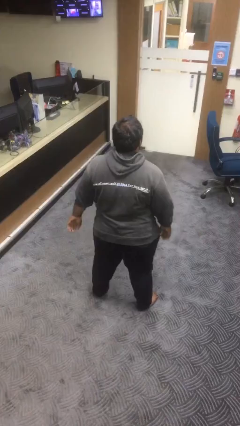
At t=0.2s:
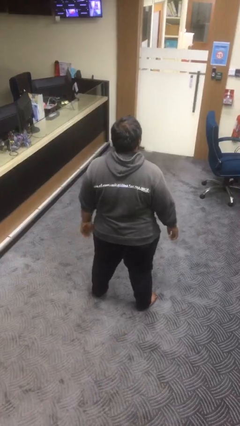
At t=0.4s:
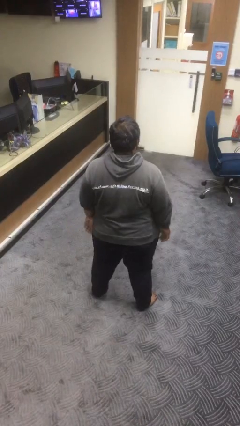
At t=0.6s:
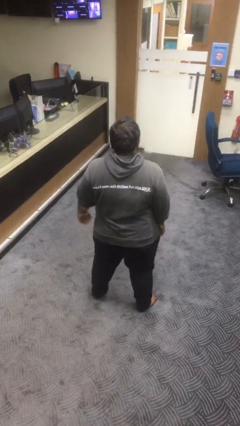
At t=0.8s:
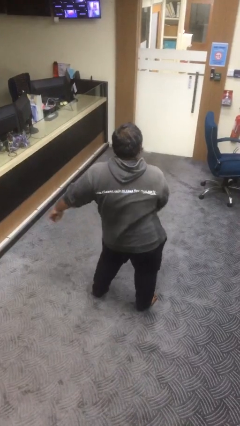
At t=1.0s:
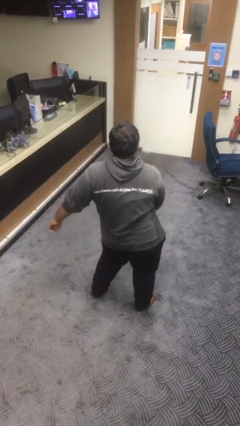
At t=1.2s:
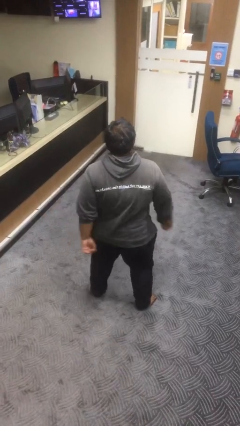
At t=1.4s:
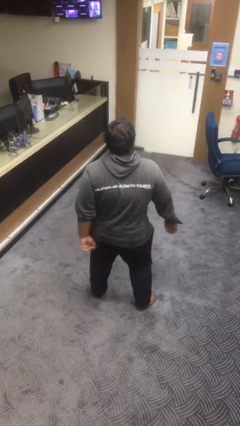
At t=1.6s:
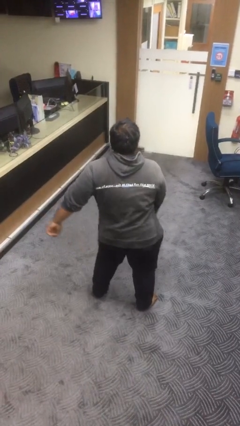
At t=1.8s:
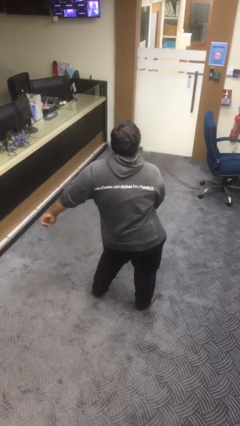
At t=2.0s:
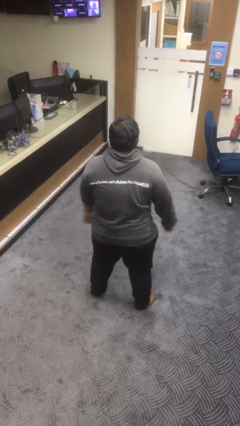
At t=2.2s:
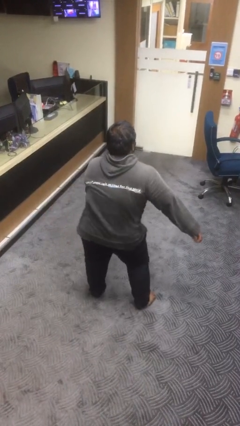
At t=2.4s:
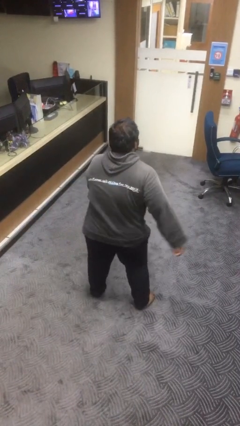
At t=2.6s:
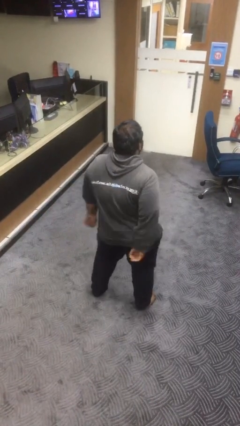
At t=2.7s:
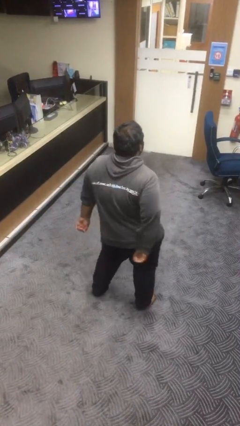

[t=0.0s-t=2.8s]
person dances in place

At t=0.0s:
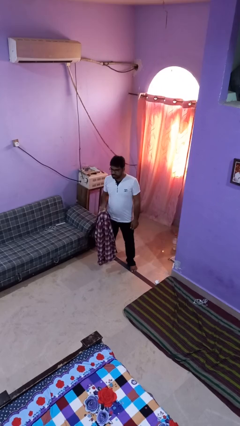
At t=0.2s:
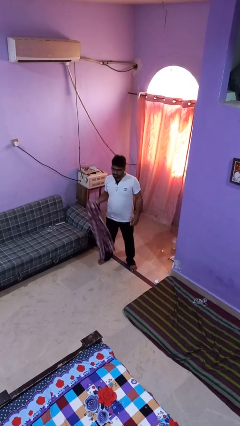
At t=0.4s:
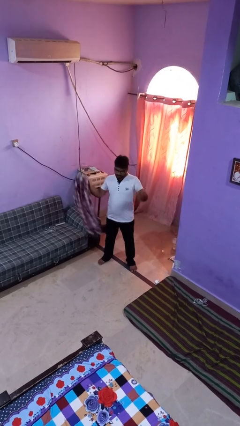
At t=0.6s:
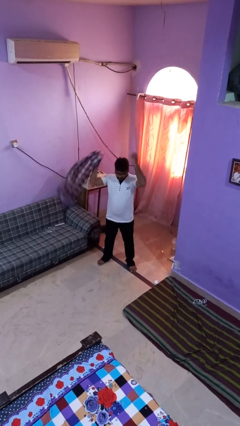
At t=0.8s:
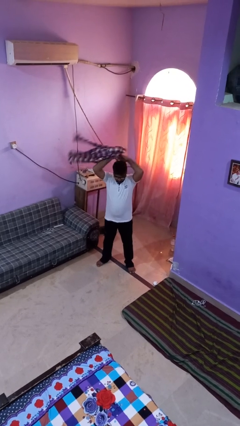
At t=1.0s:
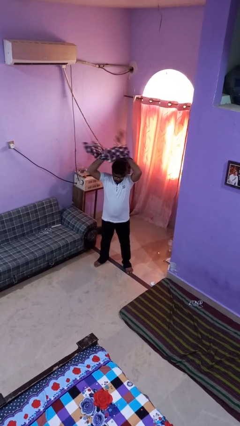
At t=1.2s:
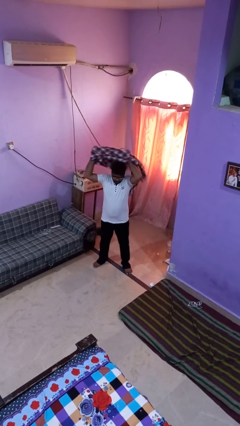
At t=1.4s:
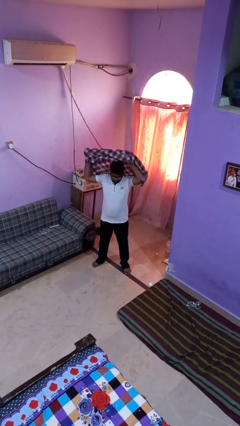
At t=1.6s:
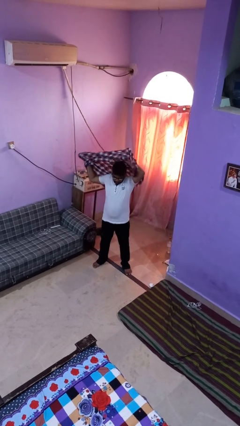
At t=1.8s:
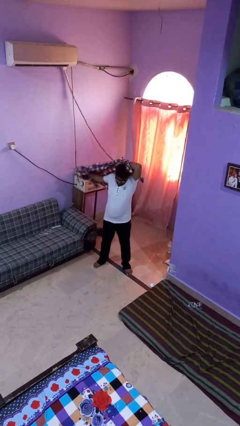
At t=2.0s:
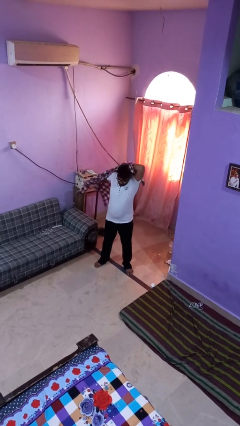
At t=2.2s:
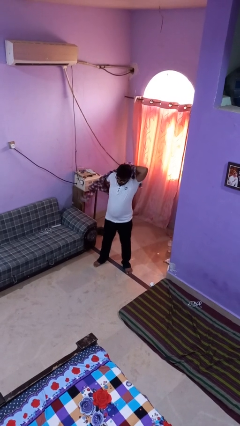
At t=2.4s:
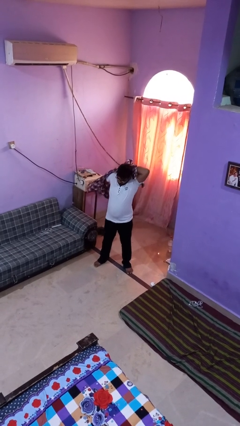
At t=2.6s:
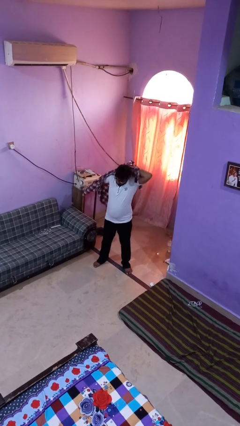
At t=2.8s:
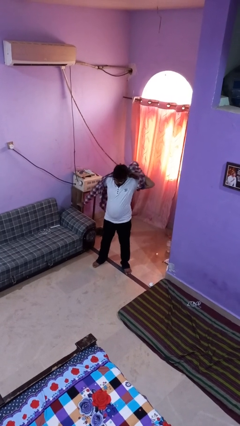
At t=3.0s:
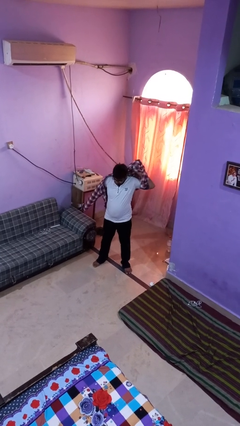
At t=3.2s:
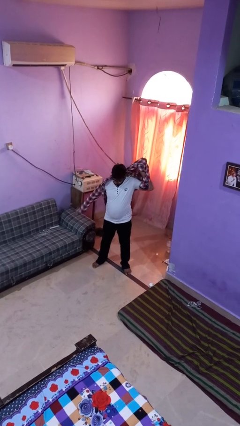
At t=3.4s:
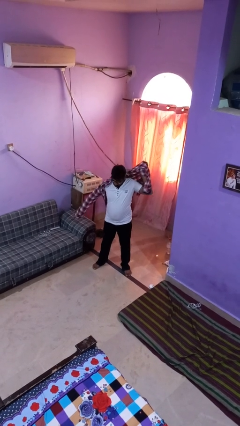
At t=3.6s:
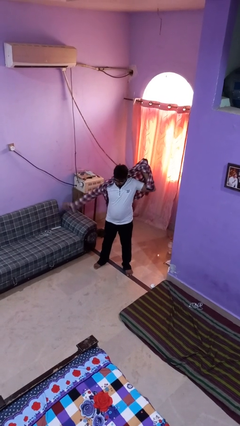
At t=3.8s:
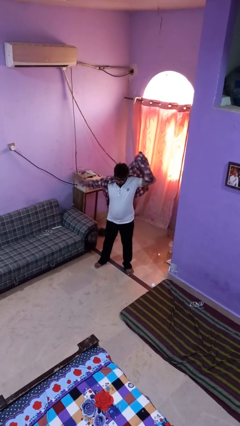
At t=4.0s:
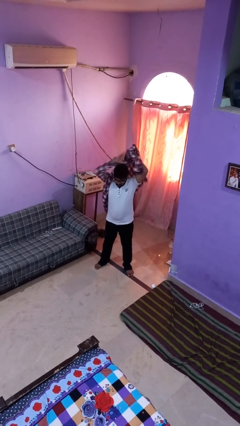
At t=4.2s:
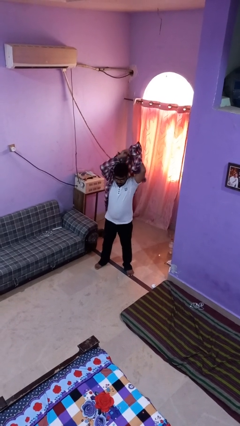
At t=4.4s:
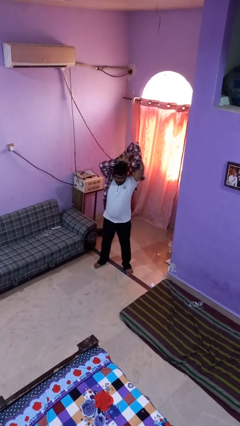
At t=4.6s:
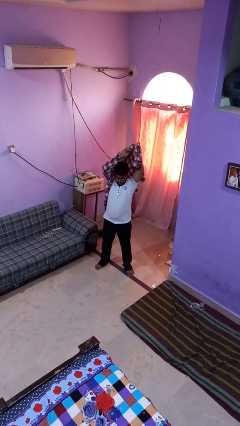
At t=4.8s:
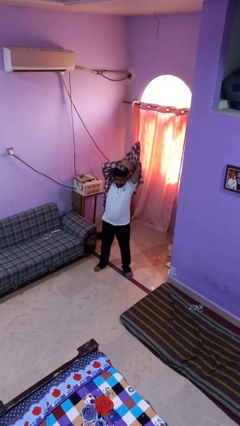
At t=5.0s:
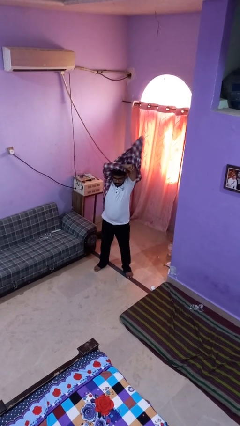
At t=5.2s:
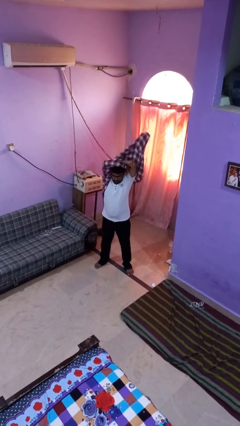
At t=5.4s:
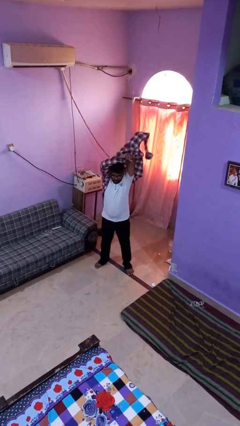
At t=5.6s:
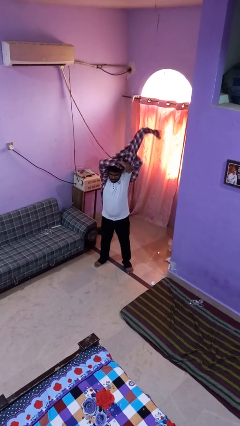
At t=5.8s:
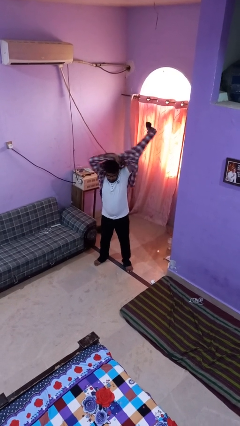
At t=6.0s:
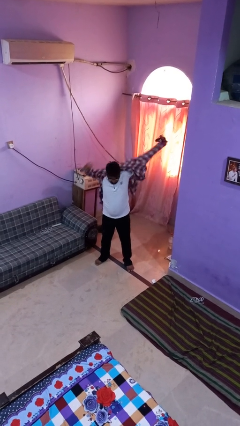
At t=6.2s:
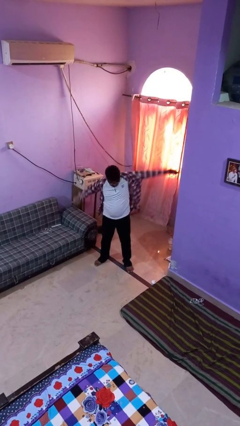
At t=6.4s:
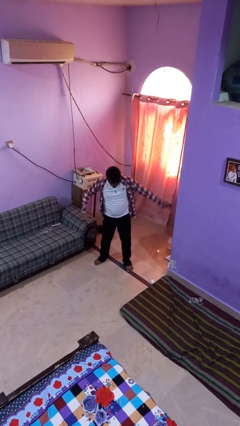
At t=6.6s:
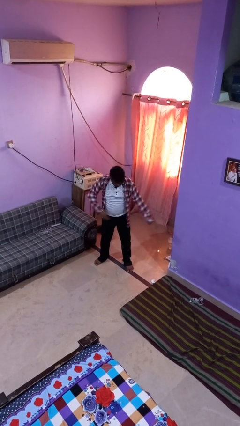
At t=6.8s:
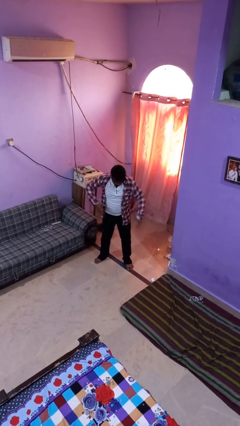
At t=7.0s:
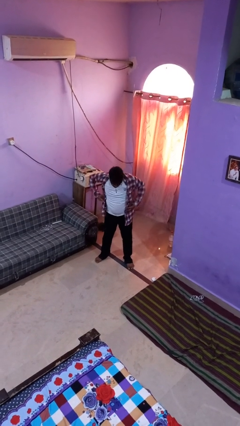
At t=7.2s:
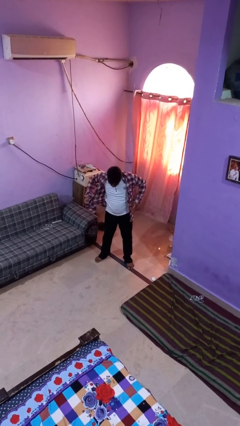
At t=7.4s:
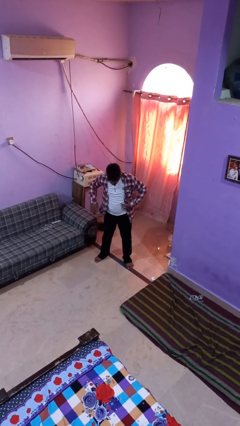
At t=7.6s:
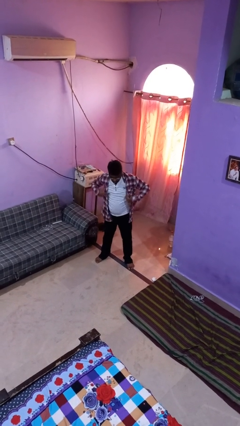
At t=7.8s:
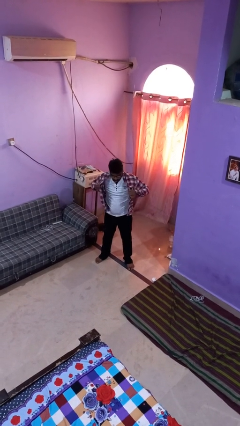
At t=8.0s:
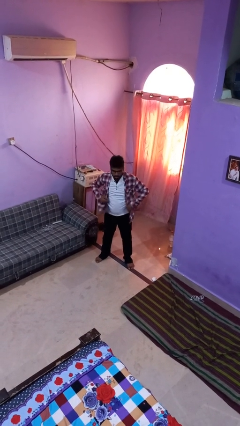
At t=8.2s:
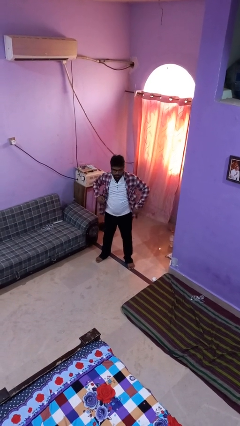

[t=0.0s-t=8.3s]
person puts on shirt

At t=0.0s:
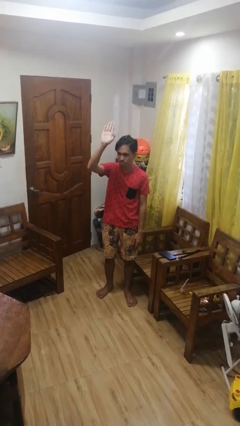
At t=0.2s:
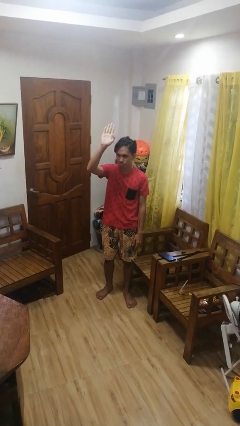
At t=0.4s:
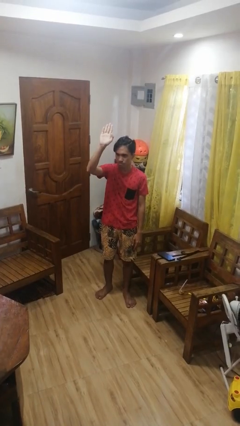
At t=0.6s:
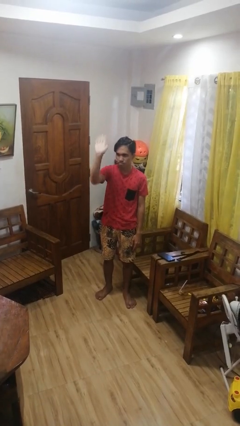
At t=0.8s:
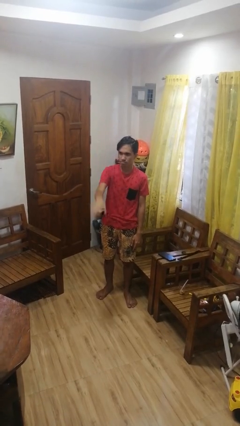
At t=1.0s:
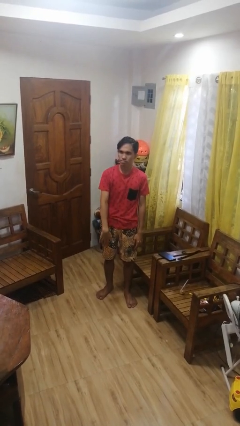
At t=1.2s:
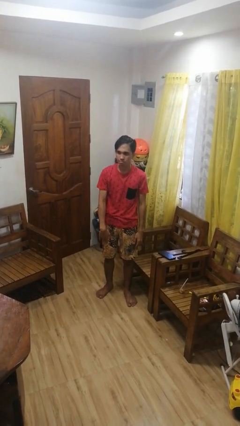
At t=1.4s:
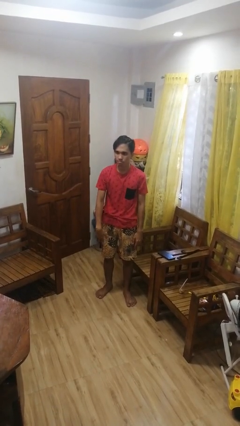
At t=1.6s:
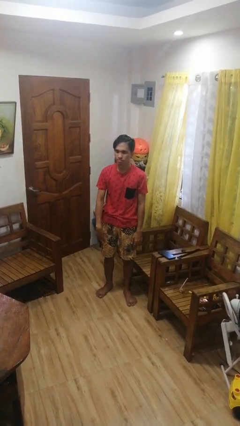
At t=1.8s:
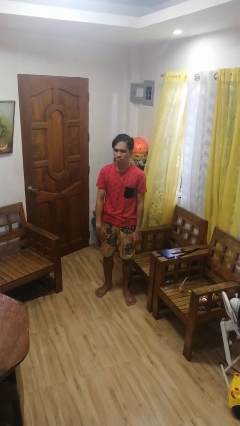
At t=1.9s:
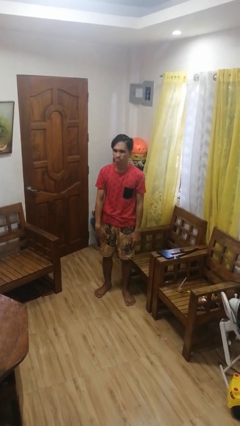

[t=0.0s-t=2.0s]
person gestures swipe down

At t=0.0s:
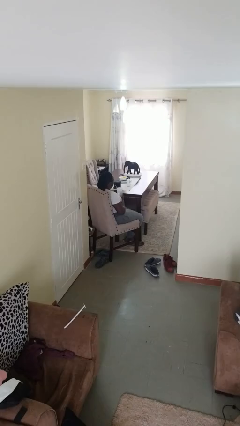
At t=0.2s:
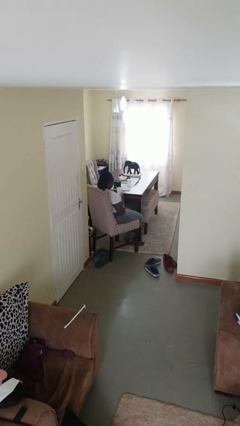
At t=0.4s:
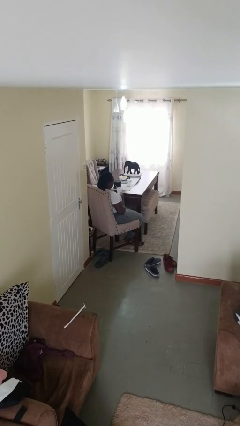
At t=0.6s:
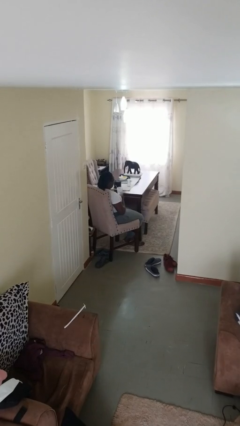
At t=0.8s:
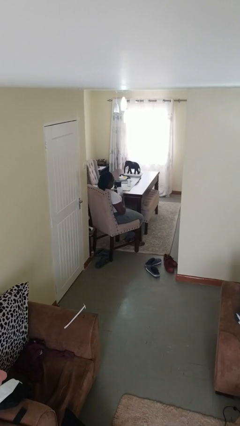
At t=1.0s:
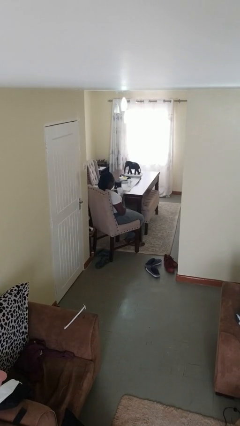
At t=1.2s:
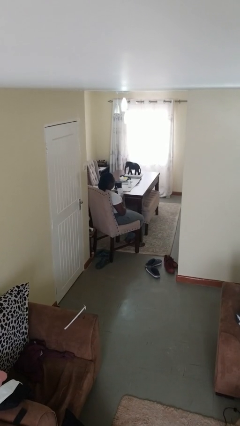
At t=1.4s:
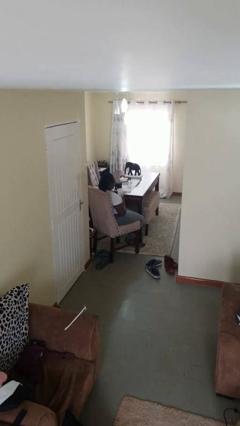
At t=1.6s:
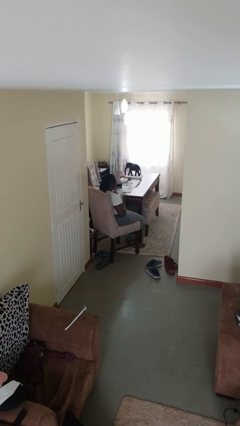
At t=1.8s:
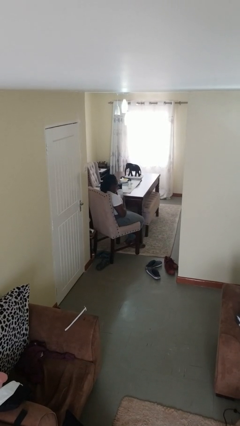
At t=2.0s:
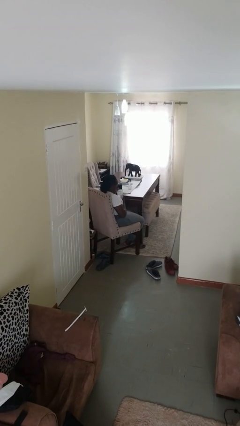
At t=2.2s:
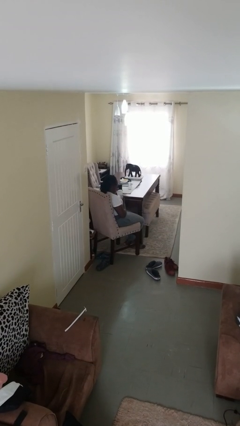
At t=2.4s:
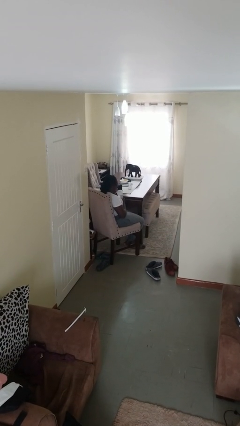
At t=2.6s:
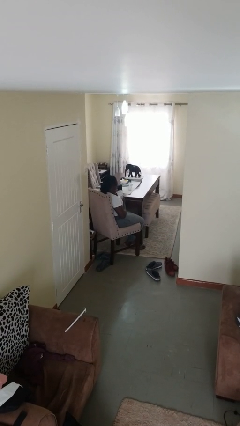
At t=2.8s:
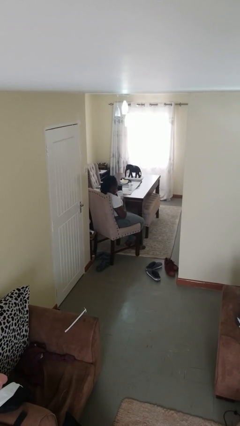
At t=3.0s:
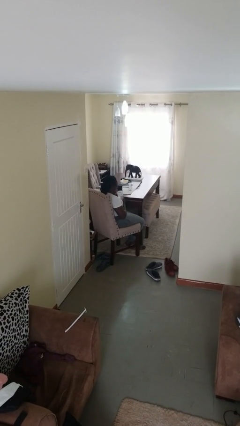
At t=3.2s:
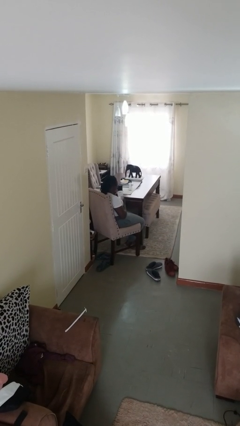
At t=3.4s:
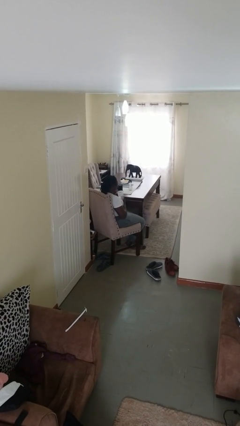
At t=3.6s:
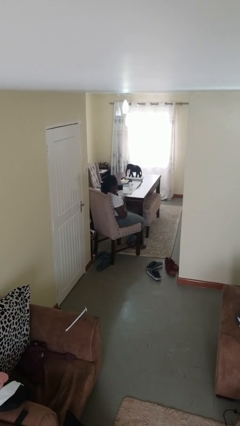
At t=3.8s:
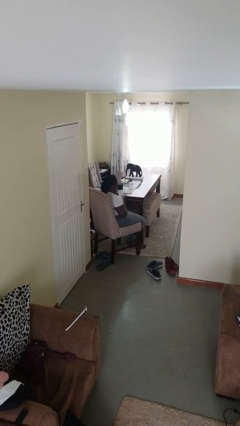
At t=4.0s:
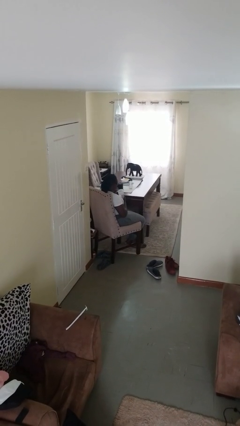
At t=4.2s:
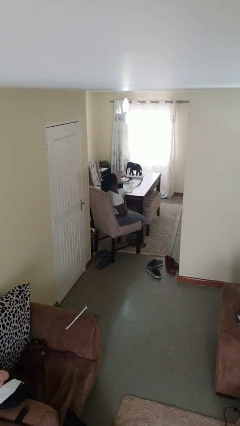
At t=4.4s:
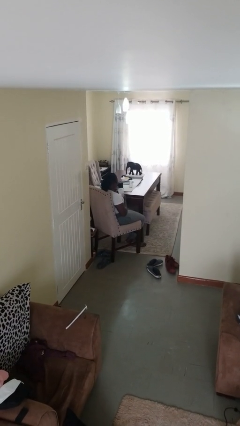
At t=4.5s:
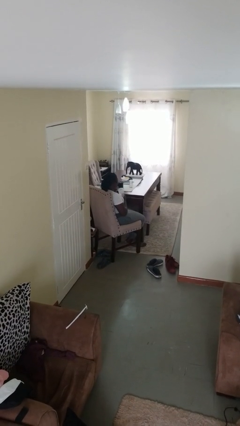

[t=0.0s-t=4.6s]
person drinks from straw
